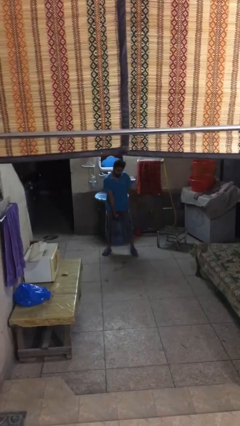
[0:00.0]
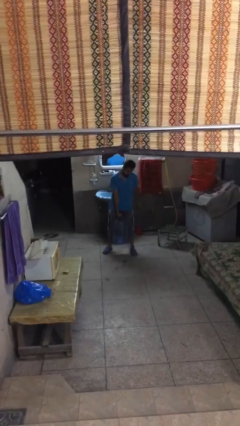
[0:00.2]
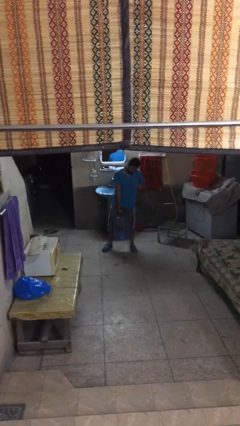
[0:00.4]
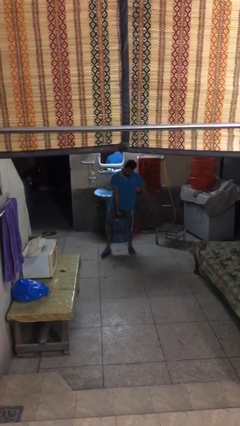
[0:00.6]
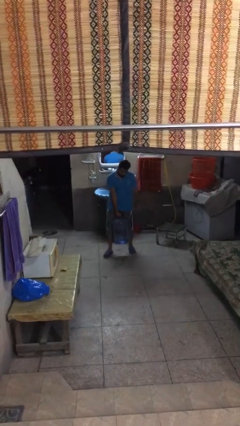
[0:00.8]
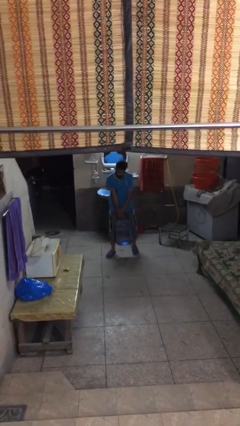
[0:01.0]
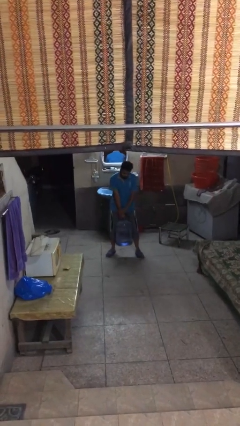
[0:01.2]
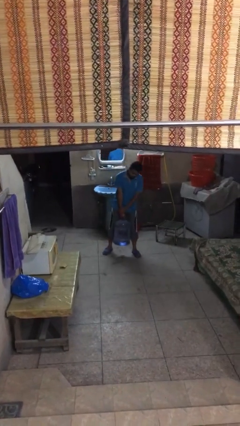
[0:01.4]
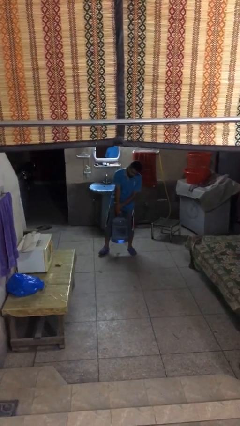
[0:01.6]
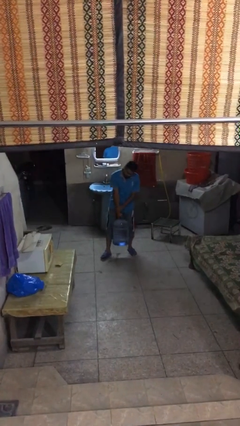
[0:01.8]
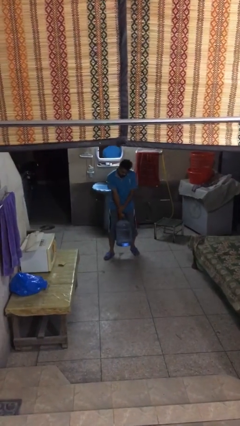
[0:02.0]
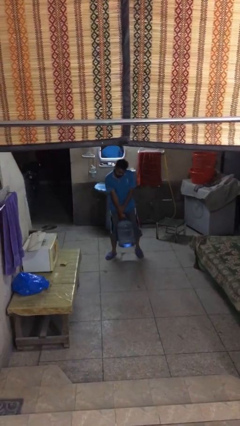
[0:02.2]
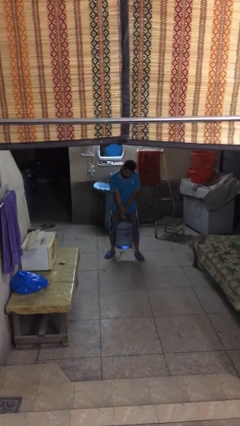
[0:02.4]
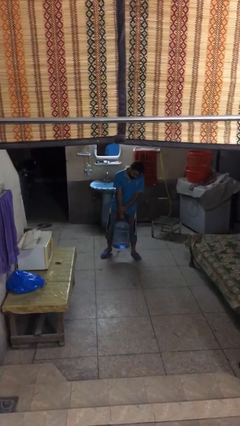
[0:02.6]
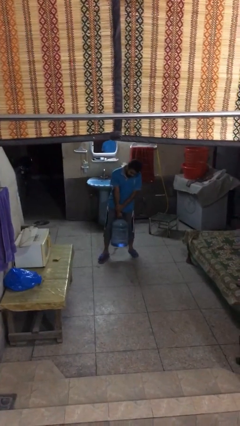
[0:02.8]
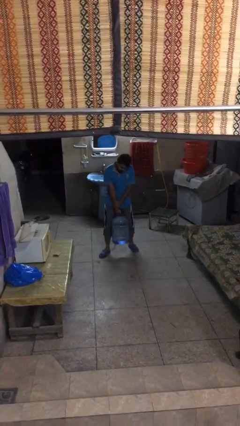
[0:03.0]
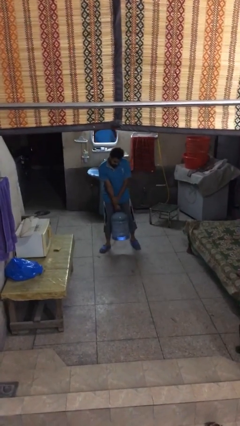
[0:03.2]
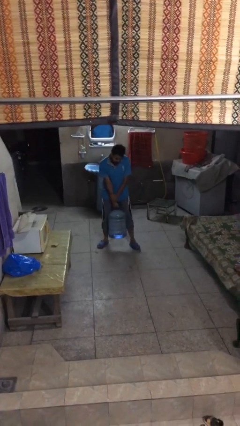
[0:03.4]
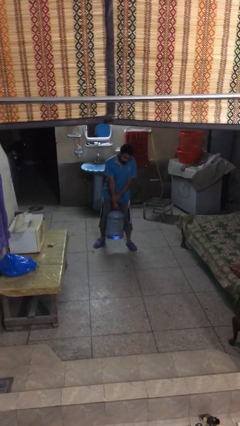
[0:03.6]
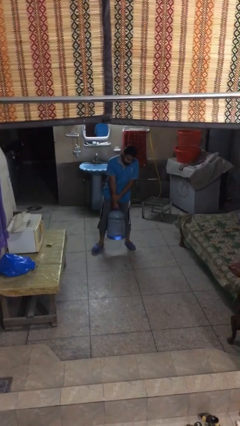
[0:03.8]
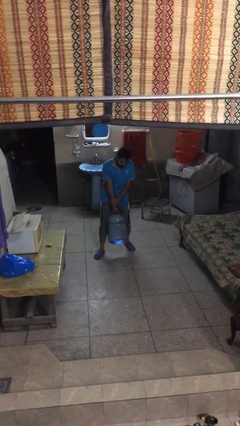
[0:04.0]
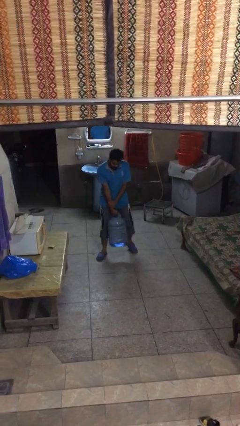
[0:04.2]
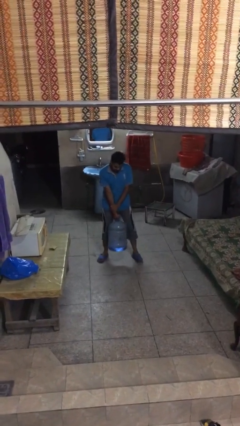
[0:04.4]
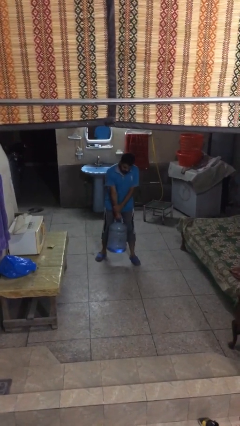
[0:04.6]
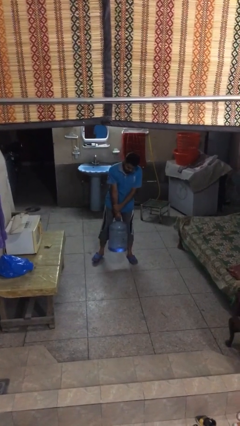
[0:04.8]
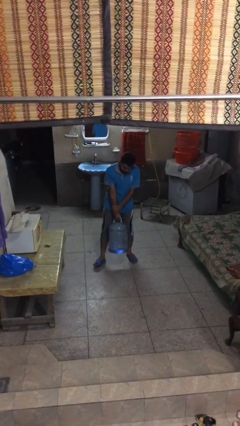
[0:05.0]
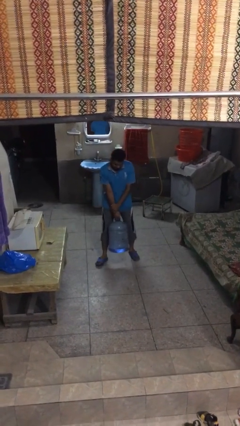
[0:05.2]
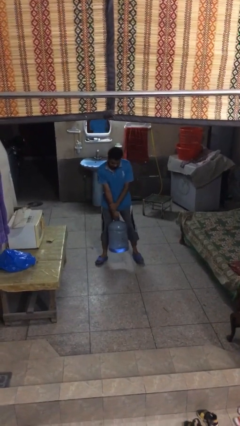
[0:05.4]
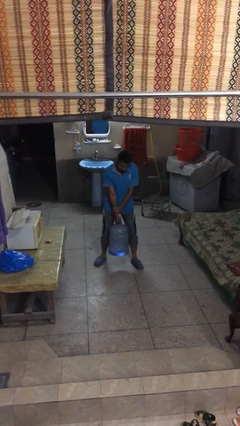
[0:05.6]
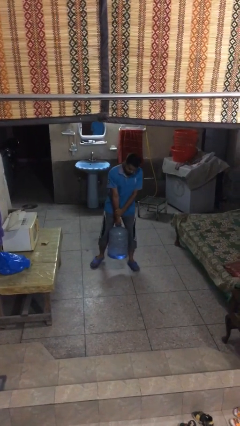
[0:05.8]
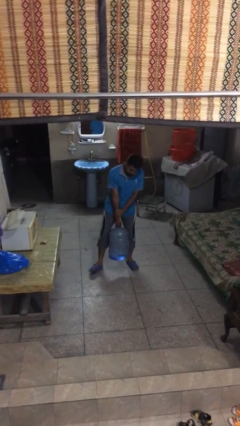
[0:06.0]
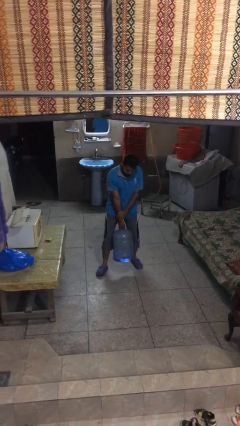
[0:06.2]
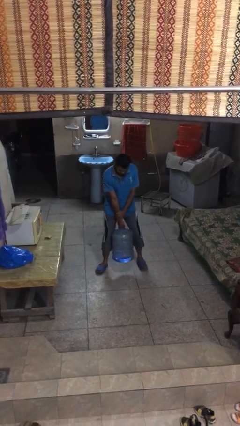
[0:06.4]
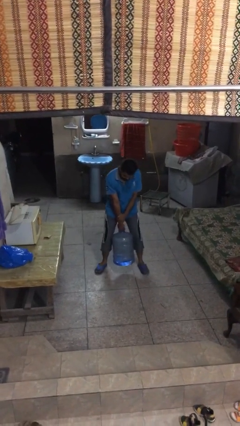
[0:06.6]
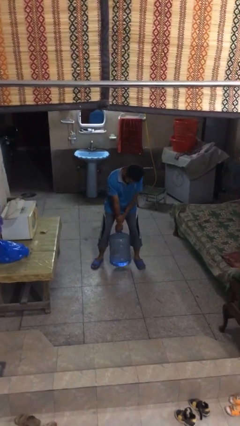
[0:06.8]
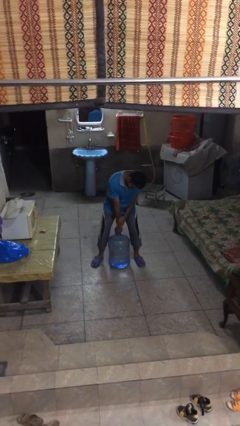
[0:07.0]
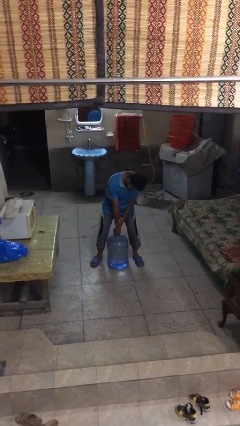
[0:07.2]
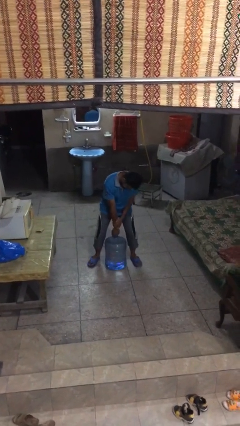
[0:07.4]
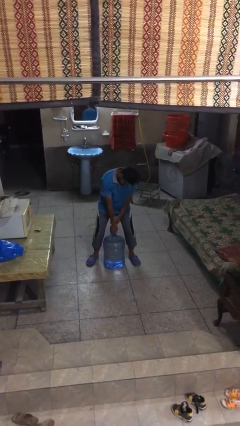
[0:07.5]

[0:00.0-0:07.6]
person carries heavy object

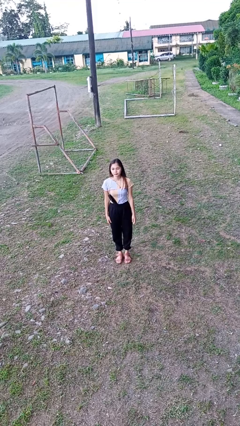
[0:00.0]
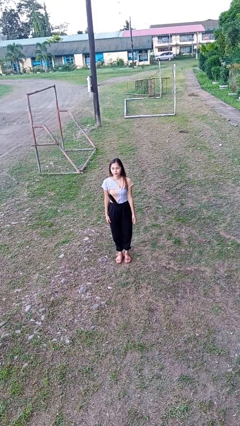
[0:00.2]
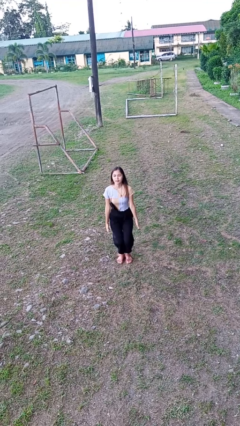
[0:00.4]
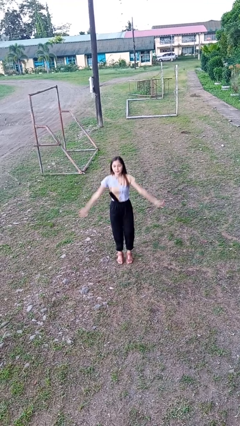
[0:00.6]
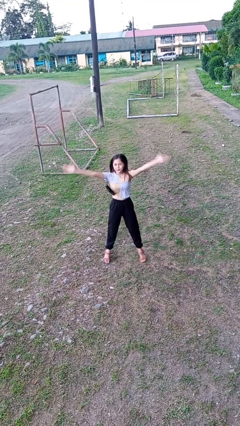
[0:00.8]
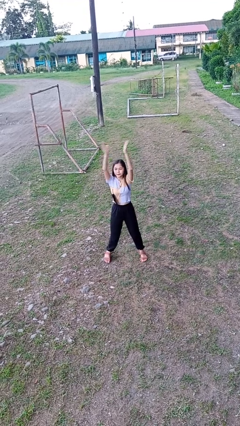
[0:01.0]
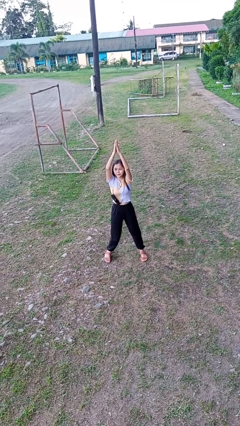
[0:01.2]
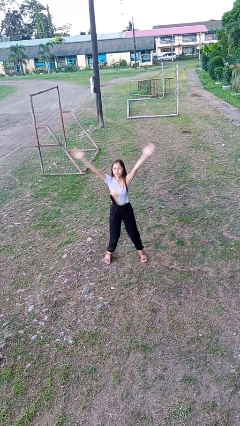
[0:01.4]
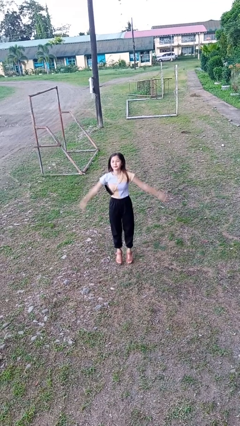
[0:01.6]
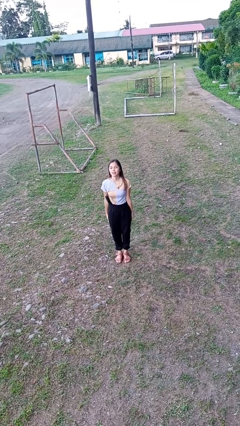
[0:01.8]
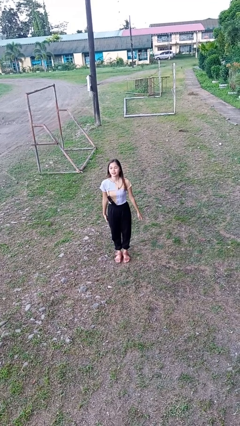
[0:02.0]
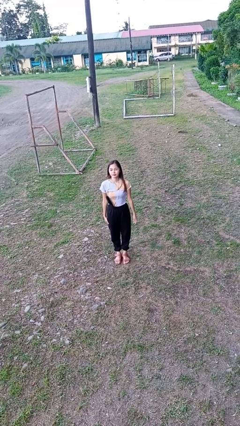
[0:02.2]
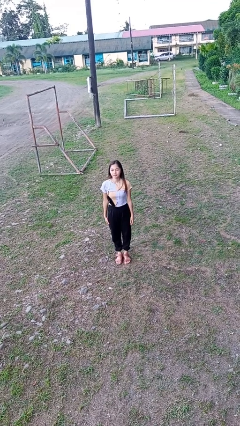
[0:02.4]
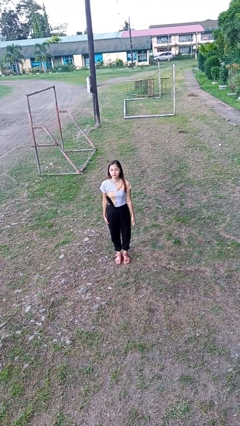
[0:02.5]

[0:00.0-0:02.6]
person exercises with jumping jacks

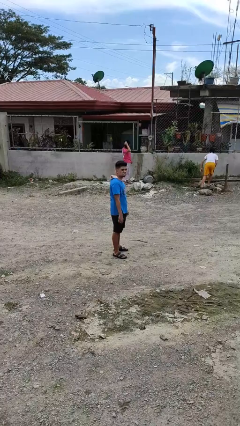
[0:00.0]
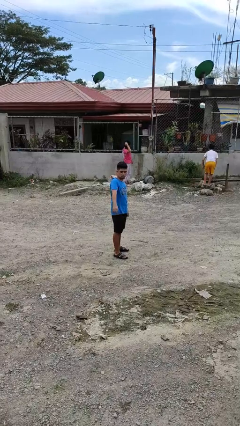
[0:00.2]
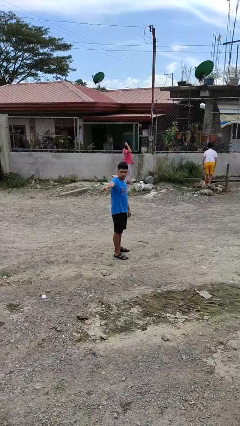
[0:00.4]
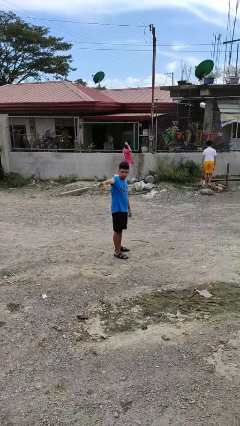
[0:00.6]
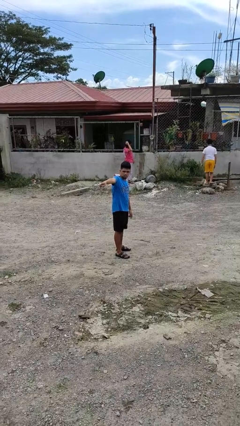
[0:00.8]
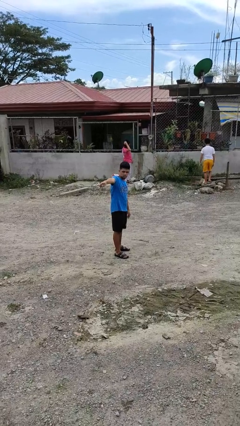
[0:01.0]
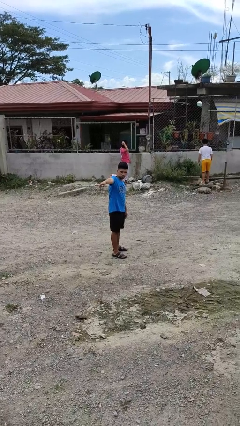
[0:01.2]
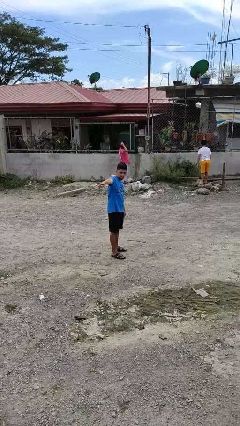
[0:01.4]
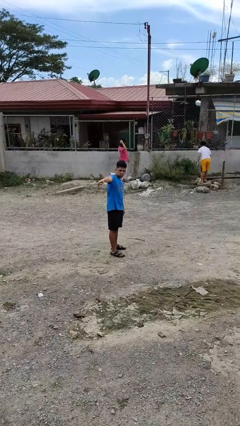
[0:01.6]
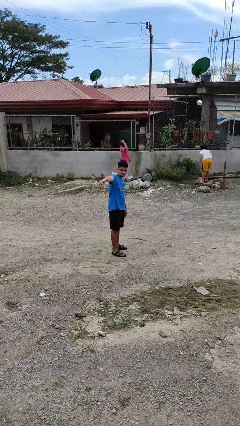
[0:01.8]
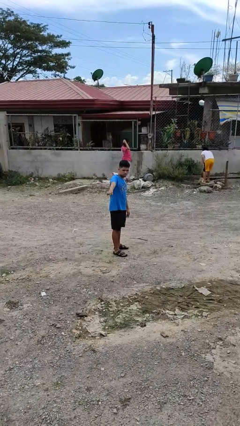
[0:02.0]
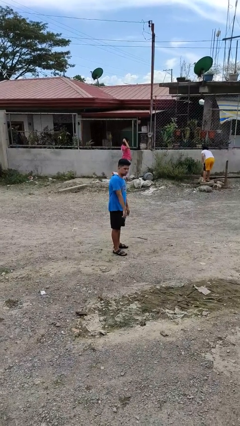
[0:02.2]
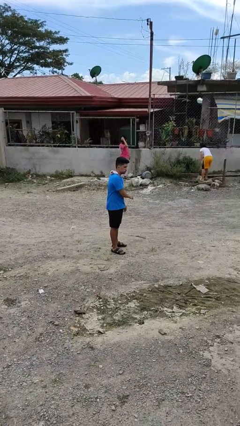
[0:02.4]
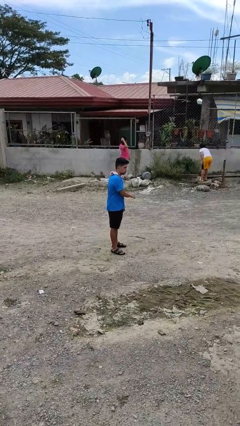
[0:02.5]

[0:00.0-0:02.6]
person points at person

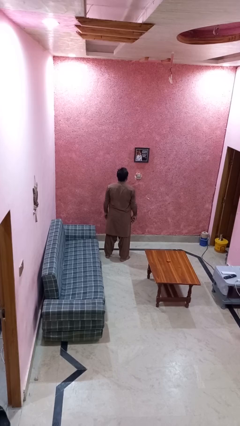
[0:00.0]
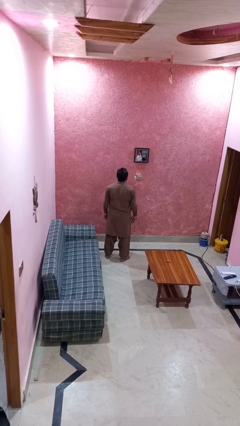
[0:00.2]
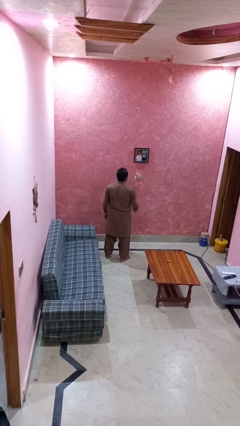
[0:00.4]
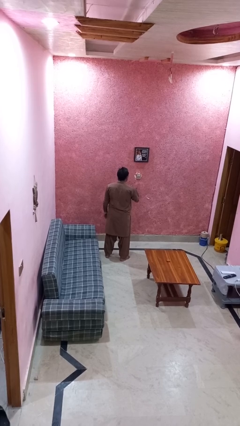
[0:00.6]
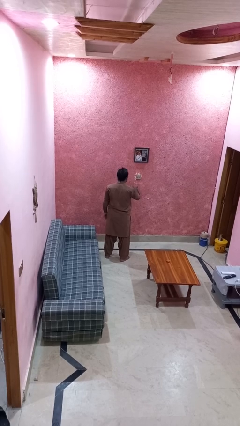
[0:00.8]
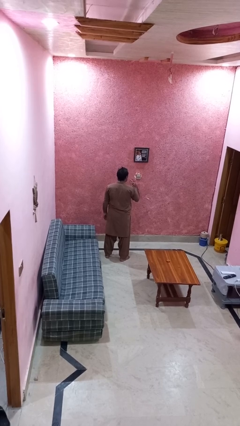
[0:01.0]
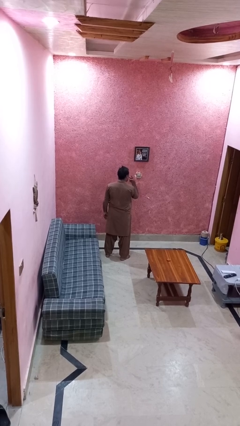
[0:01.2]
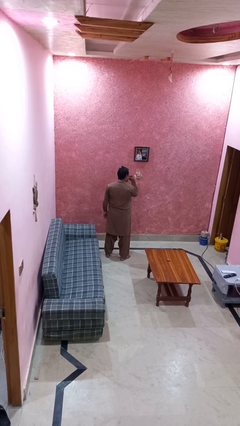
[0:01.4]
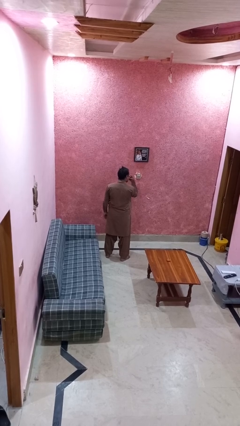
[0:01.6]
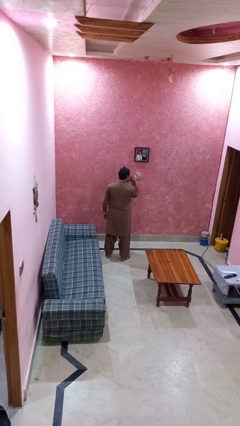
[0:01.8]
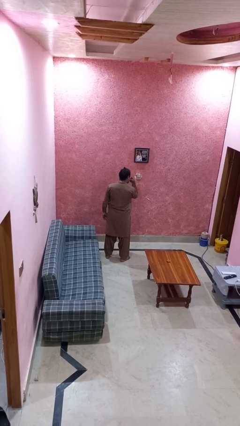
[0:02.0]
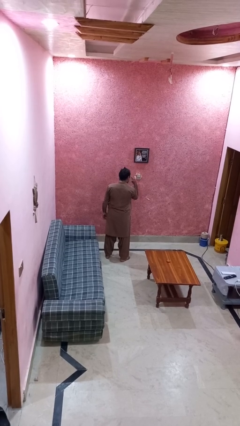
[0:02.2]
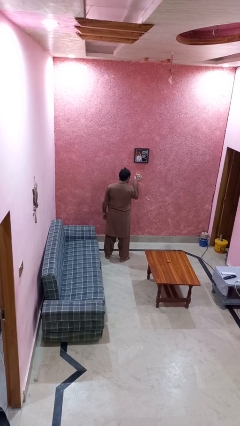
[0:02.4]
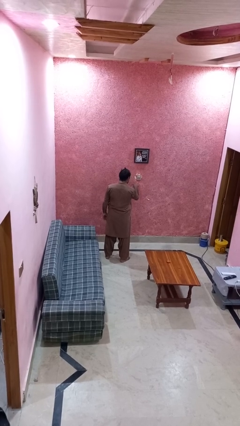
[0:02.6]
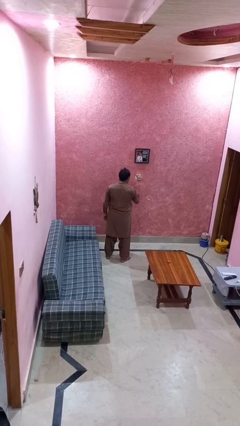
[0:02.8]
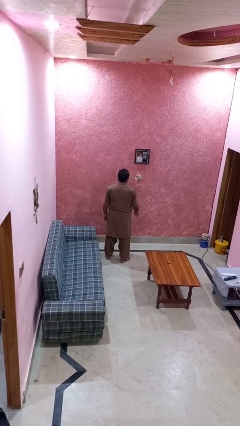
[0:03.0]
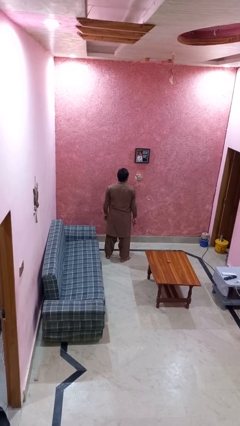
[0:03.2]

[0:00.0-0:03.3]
person gestures watch closely

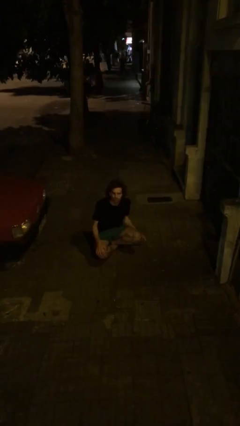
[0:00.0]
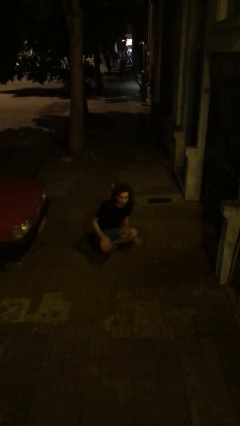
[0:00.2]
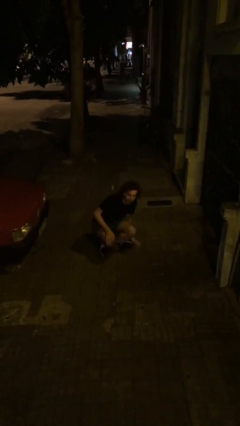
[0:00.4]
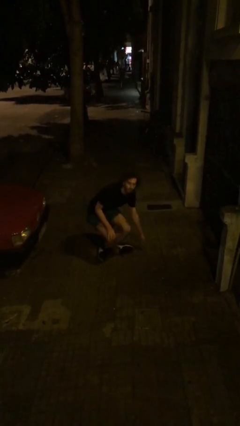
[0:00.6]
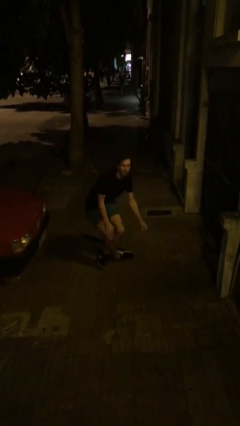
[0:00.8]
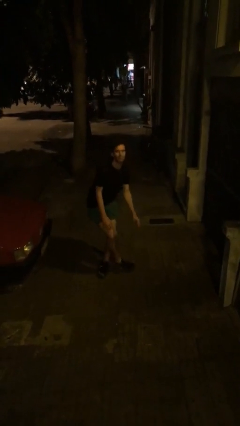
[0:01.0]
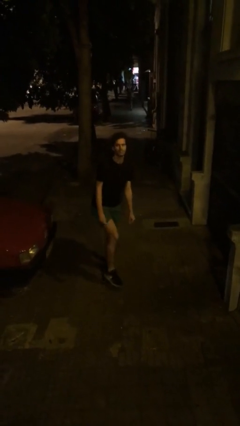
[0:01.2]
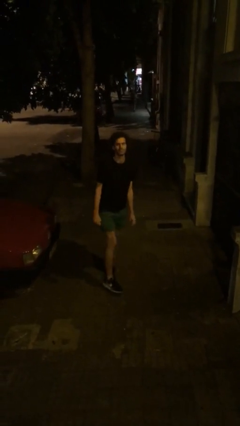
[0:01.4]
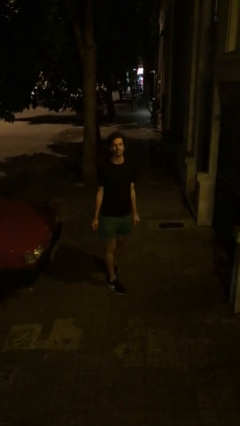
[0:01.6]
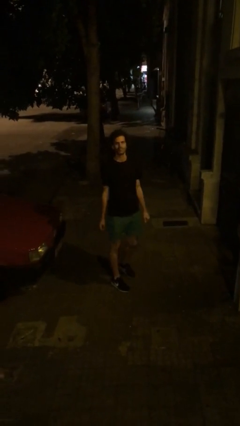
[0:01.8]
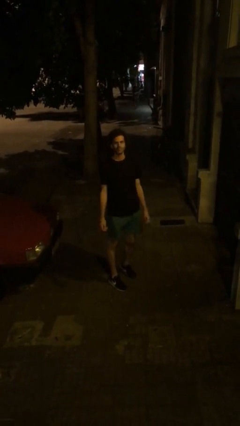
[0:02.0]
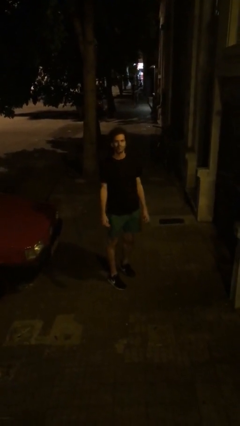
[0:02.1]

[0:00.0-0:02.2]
person stands up
